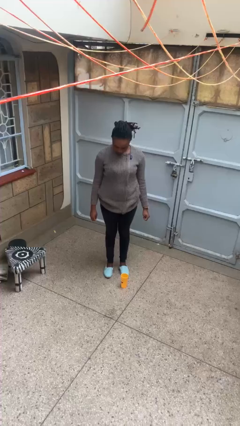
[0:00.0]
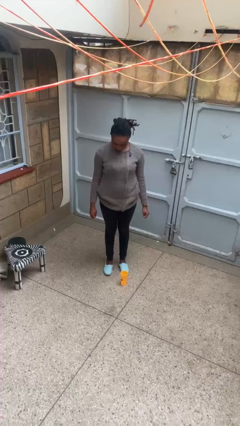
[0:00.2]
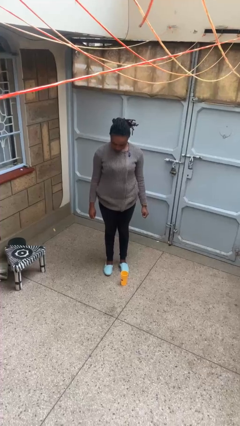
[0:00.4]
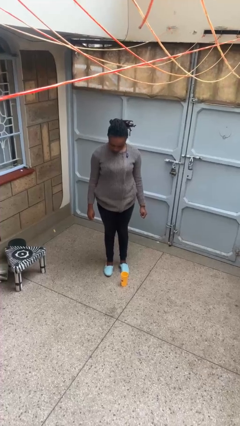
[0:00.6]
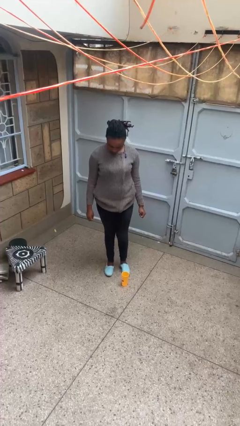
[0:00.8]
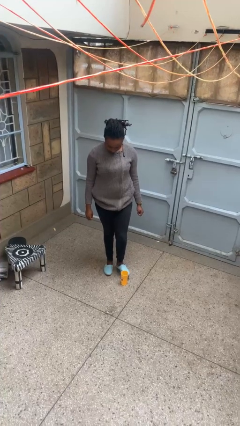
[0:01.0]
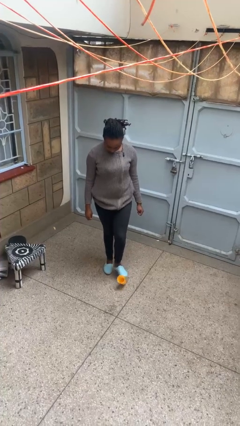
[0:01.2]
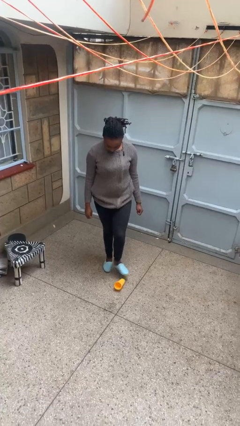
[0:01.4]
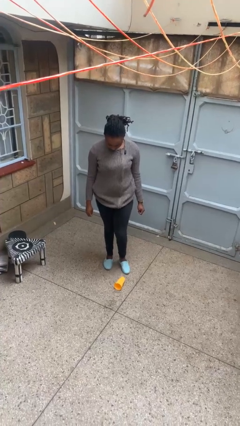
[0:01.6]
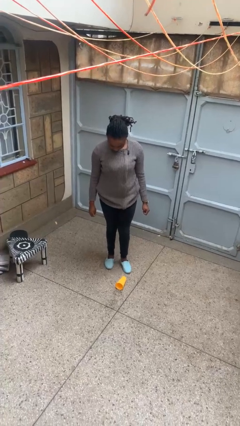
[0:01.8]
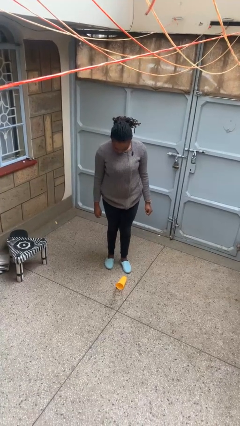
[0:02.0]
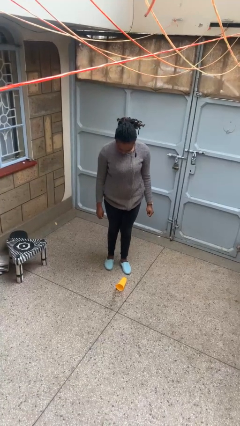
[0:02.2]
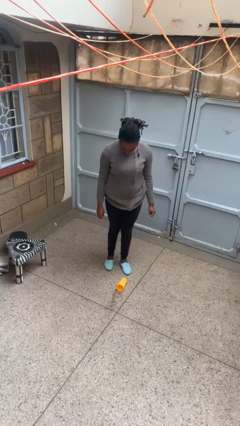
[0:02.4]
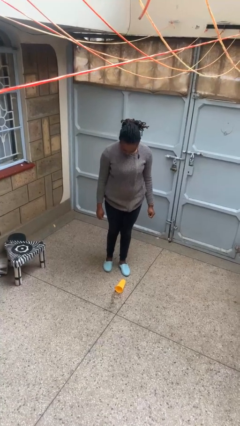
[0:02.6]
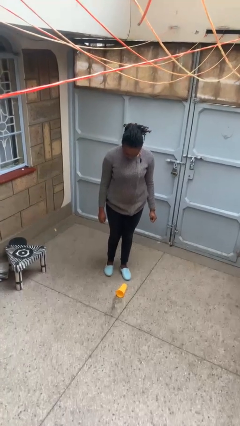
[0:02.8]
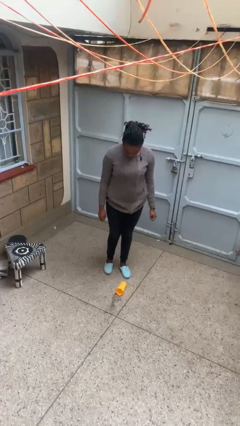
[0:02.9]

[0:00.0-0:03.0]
person spills on floor

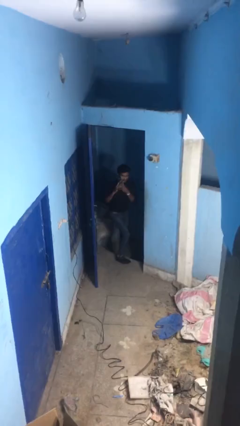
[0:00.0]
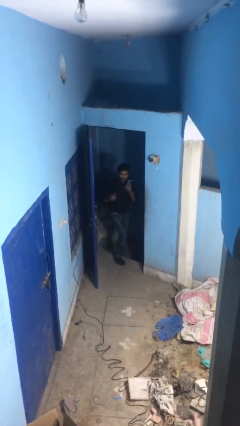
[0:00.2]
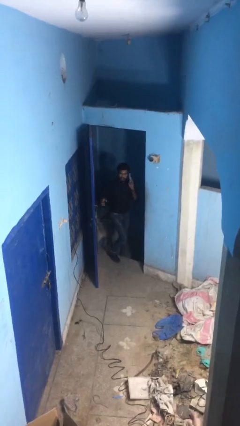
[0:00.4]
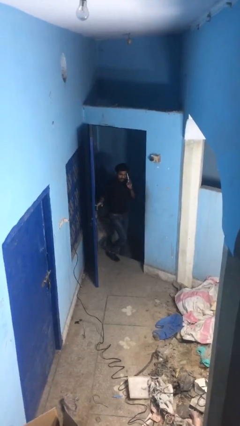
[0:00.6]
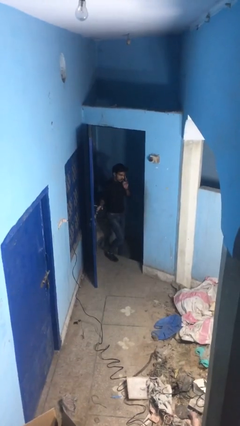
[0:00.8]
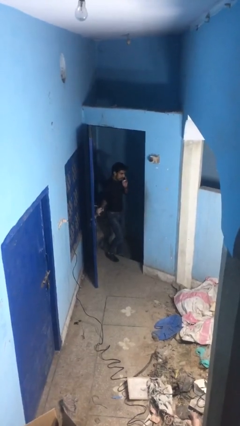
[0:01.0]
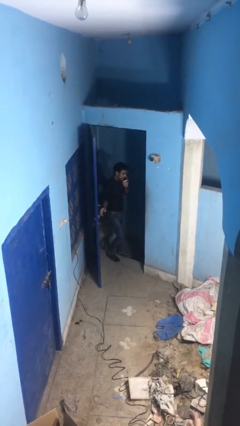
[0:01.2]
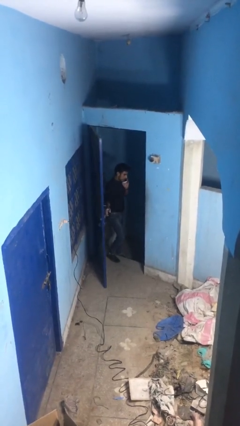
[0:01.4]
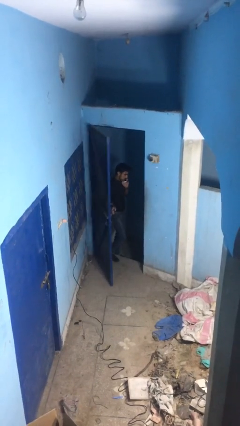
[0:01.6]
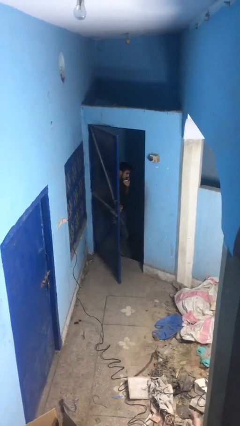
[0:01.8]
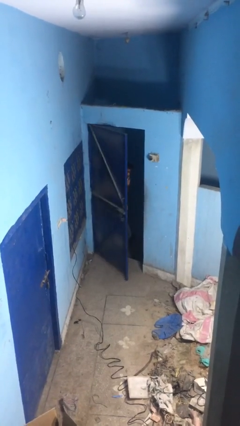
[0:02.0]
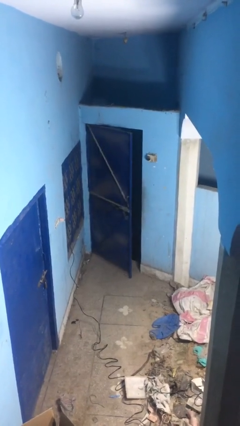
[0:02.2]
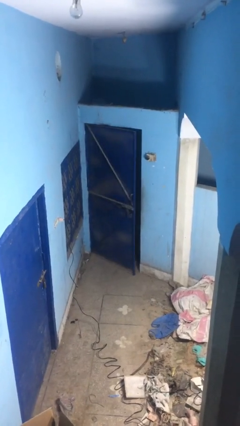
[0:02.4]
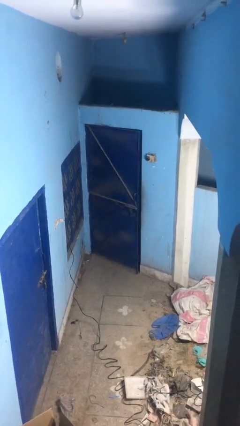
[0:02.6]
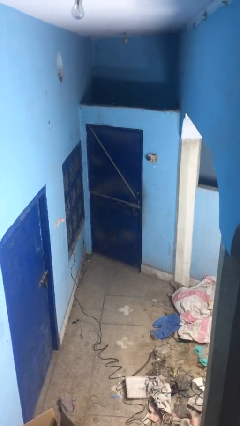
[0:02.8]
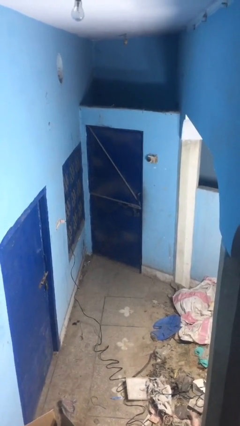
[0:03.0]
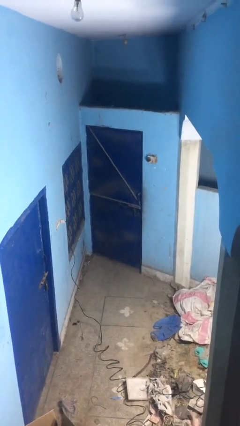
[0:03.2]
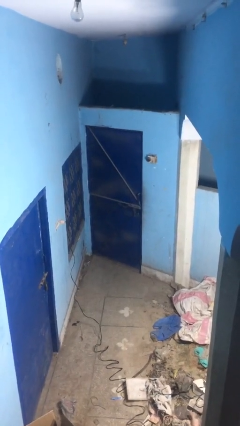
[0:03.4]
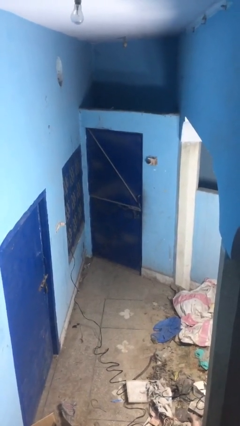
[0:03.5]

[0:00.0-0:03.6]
person closes facility door

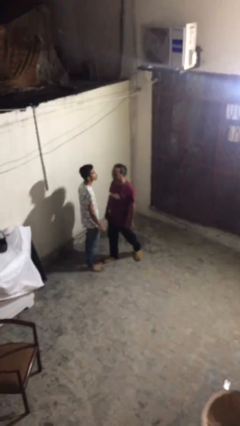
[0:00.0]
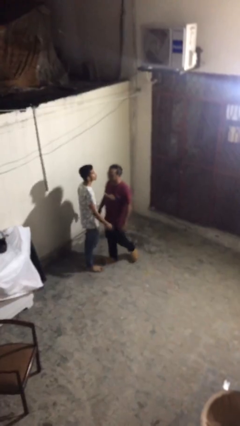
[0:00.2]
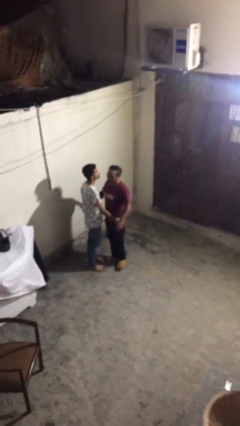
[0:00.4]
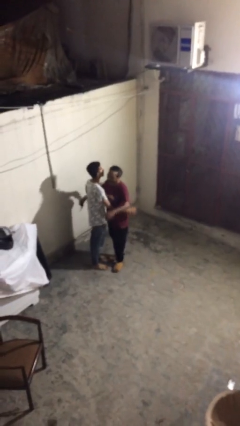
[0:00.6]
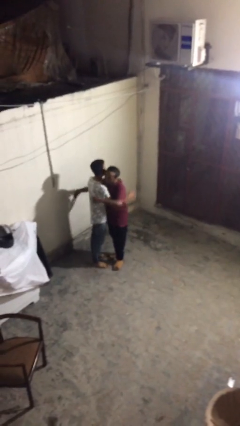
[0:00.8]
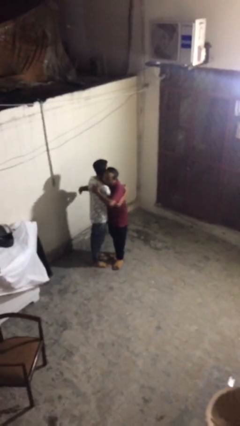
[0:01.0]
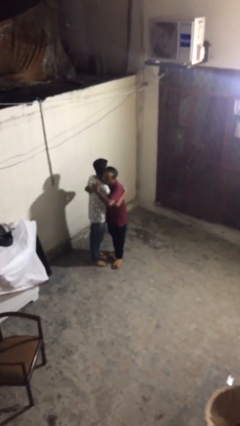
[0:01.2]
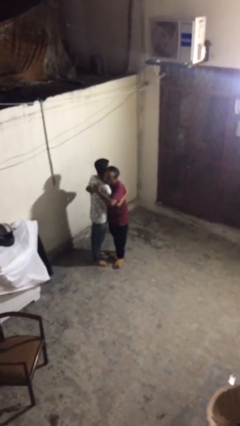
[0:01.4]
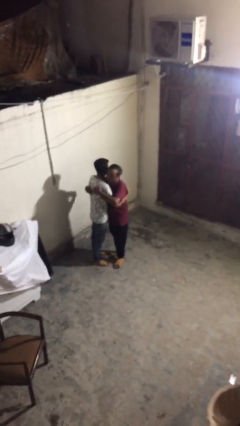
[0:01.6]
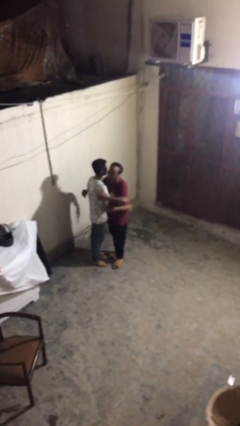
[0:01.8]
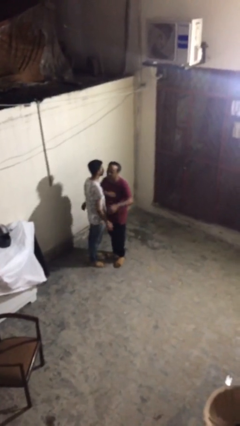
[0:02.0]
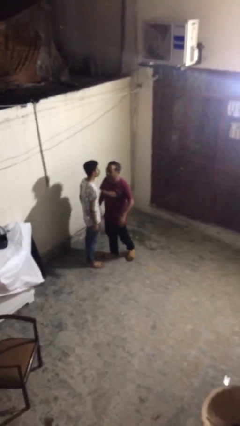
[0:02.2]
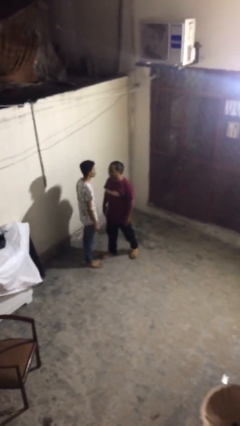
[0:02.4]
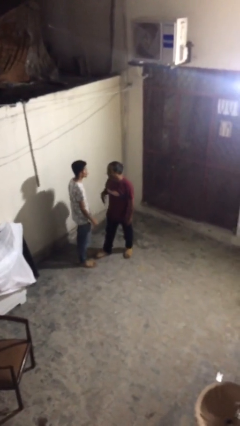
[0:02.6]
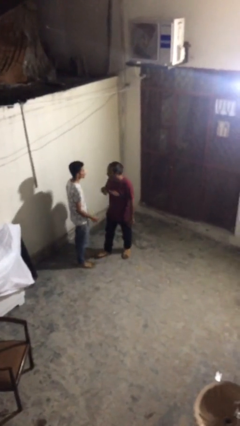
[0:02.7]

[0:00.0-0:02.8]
person embraces person

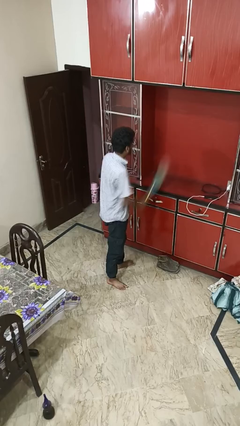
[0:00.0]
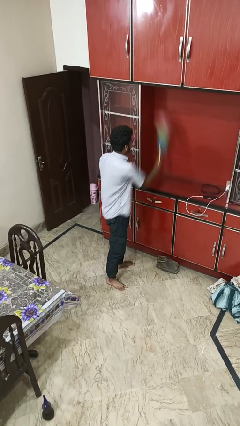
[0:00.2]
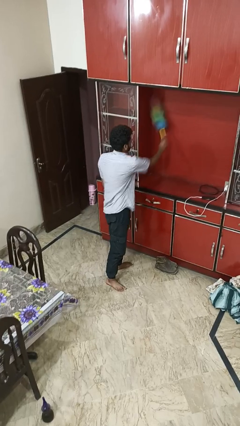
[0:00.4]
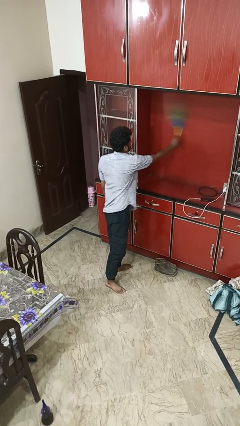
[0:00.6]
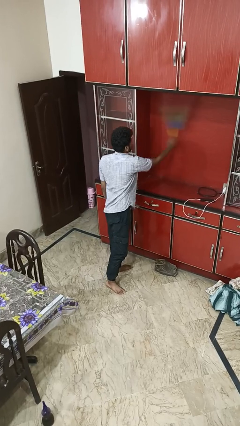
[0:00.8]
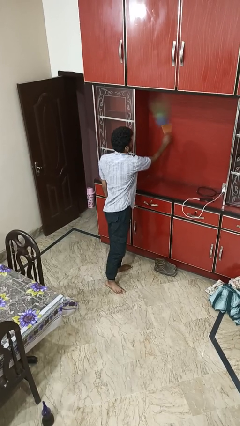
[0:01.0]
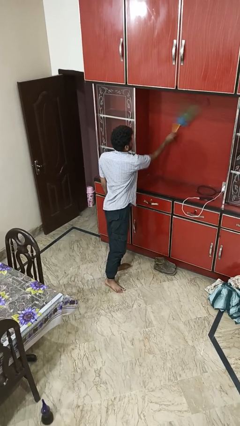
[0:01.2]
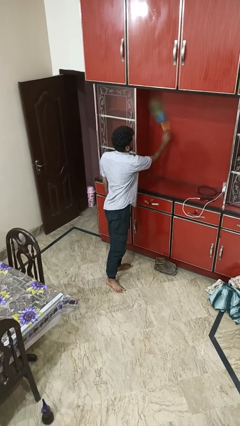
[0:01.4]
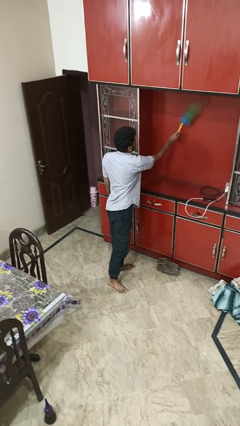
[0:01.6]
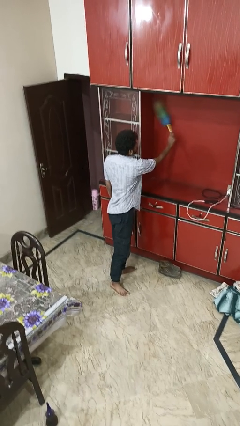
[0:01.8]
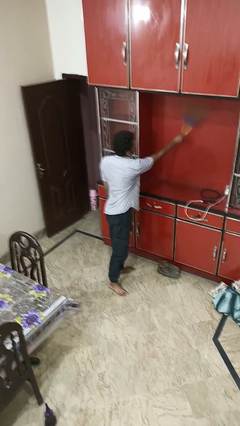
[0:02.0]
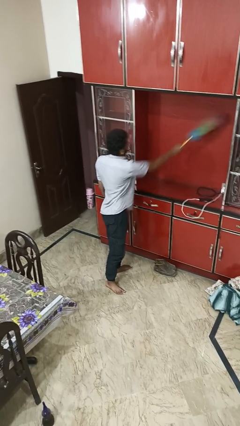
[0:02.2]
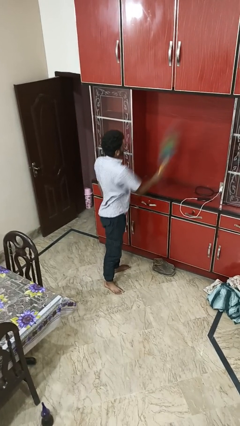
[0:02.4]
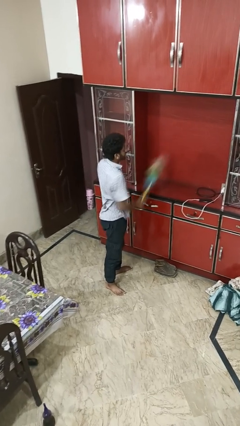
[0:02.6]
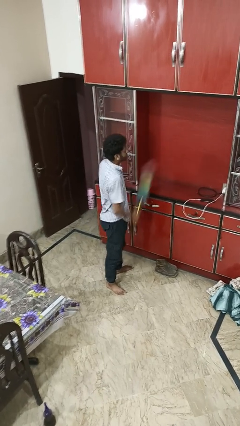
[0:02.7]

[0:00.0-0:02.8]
person dusts furniture

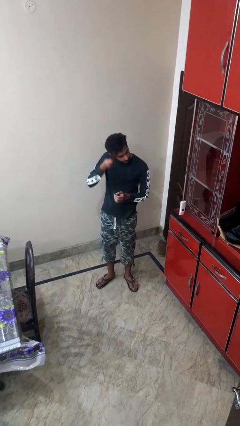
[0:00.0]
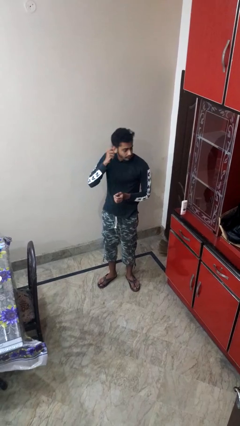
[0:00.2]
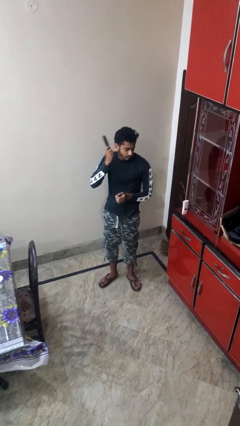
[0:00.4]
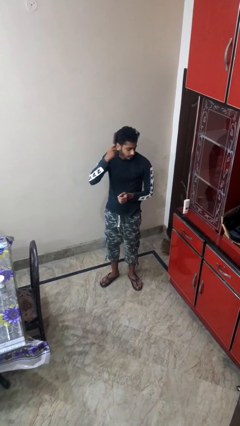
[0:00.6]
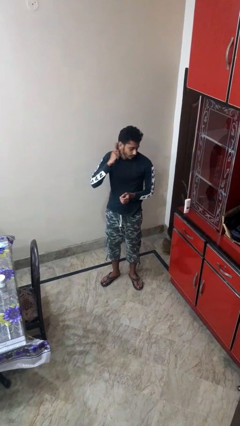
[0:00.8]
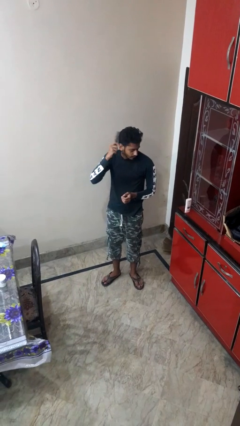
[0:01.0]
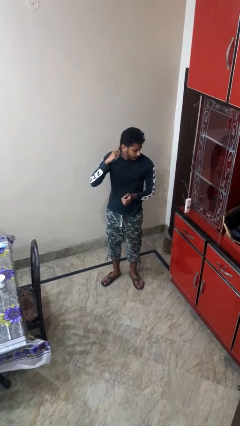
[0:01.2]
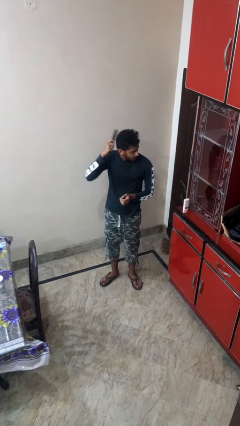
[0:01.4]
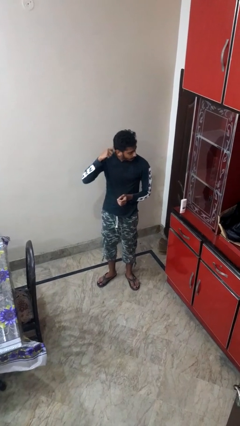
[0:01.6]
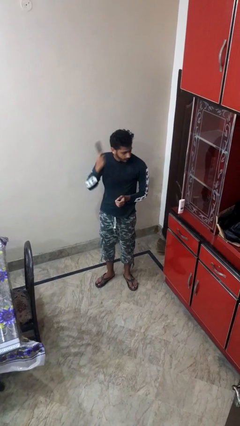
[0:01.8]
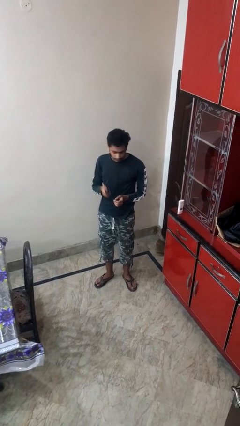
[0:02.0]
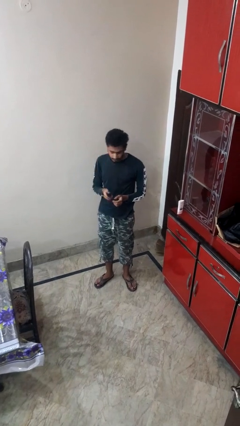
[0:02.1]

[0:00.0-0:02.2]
person brushes hair

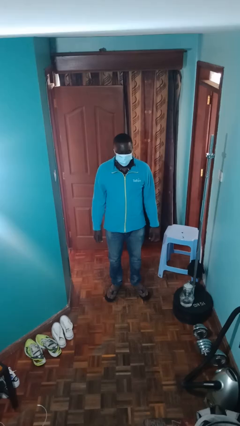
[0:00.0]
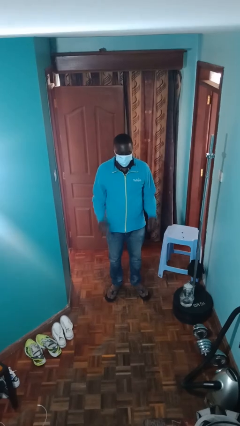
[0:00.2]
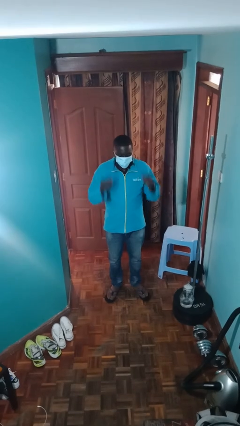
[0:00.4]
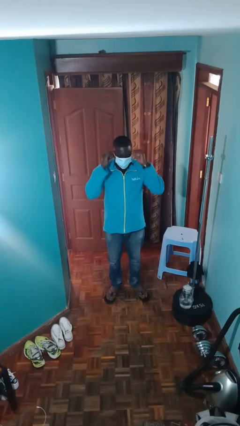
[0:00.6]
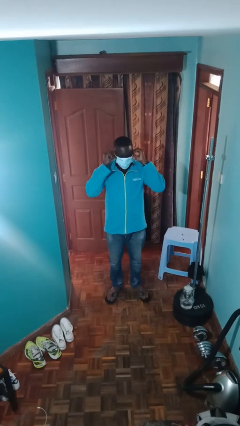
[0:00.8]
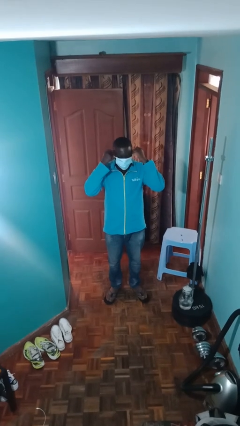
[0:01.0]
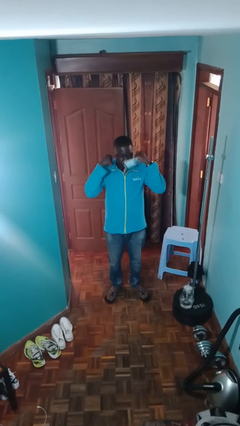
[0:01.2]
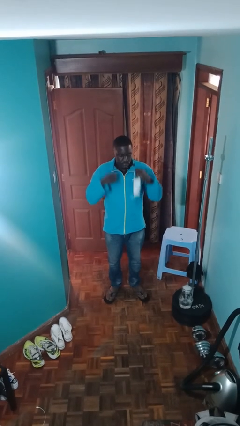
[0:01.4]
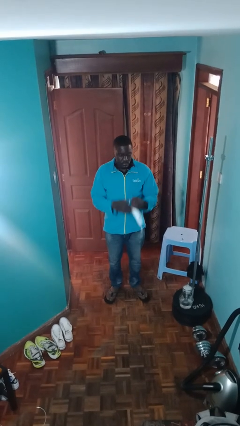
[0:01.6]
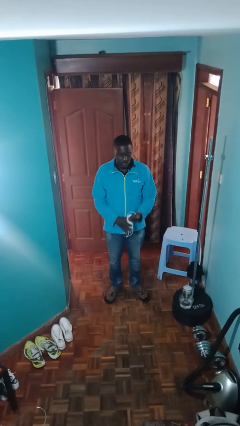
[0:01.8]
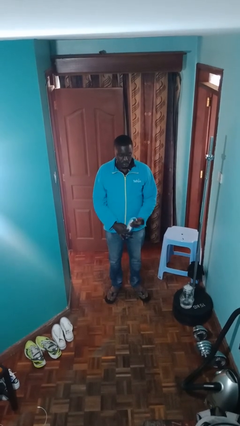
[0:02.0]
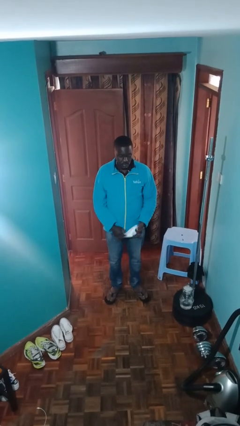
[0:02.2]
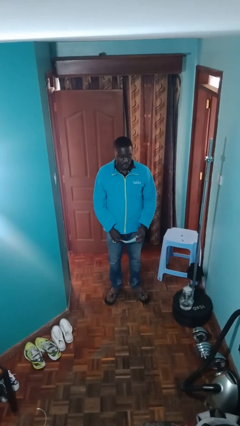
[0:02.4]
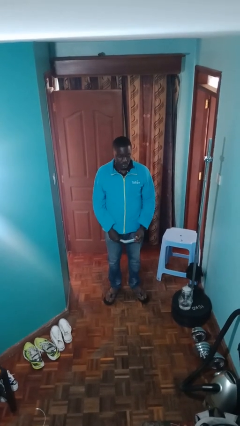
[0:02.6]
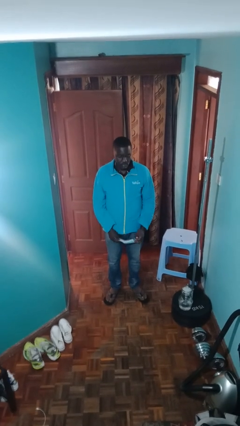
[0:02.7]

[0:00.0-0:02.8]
person takes off facemask

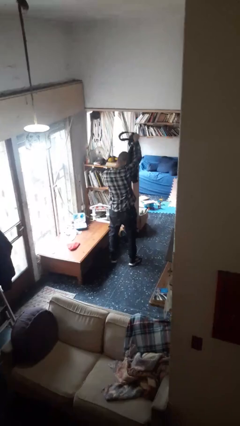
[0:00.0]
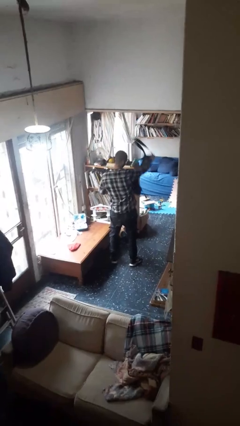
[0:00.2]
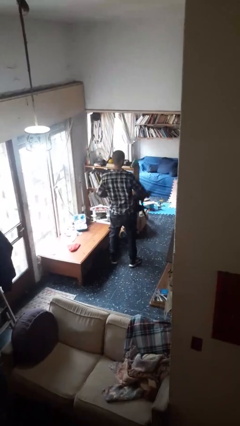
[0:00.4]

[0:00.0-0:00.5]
person takes off apron
